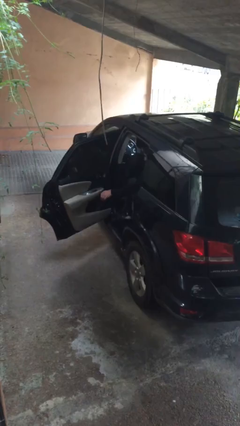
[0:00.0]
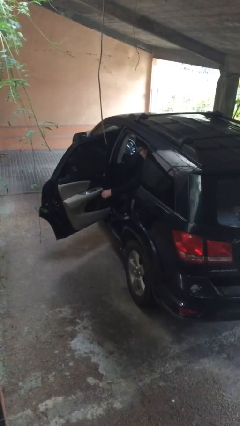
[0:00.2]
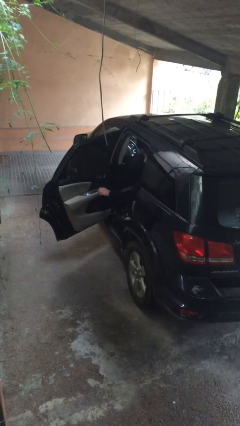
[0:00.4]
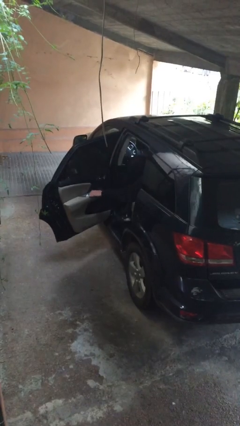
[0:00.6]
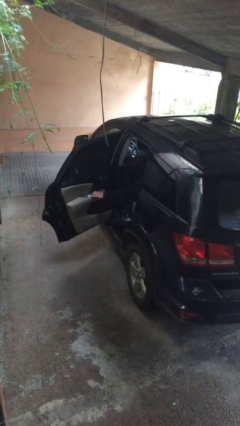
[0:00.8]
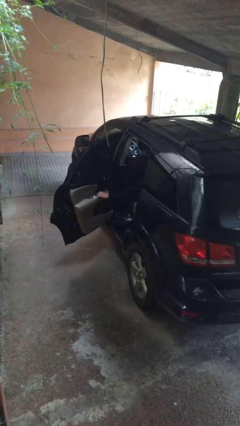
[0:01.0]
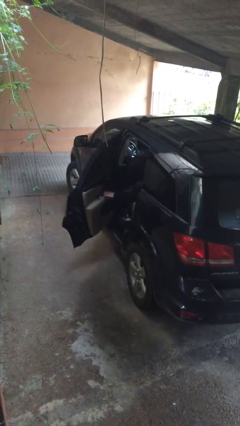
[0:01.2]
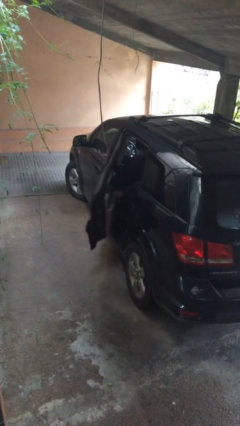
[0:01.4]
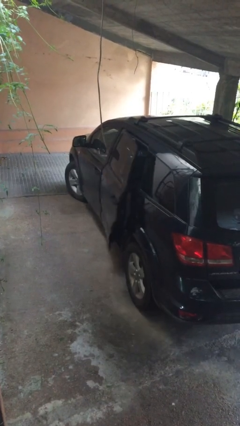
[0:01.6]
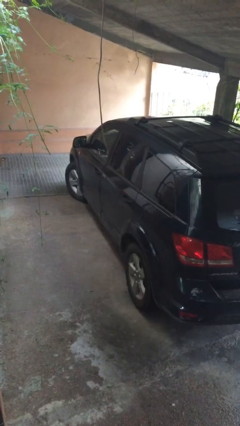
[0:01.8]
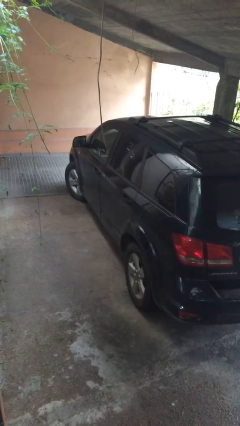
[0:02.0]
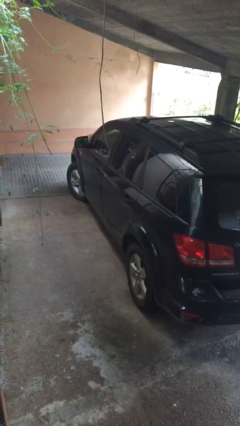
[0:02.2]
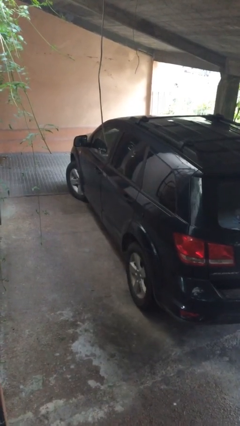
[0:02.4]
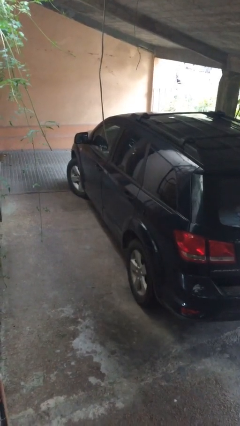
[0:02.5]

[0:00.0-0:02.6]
person closes car door

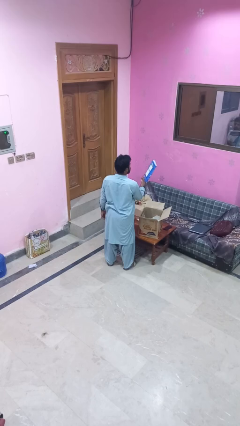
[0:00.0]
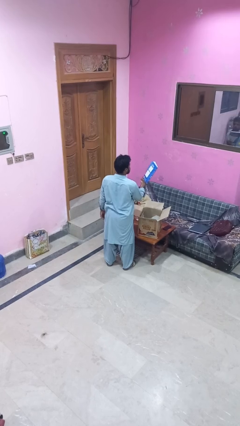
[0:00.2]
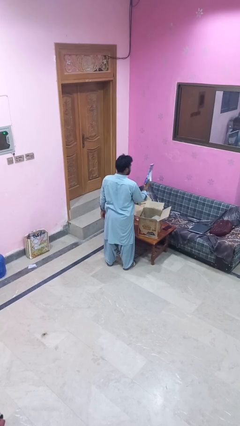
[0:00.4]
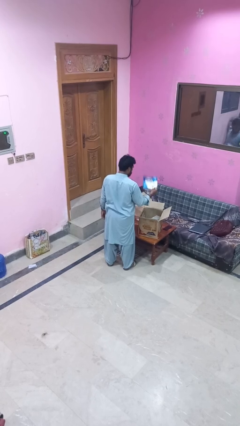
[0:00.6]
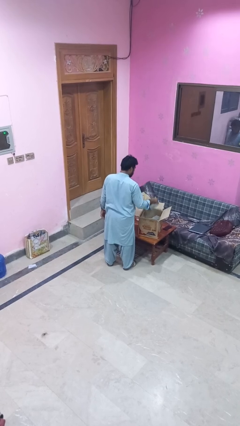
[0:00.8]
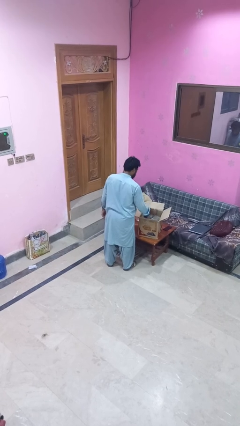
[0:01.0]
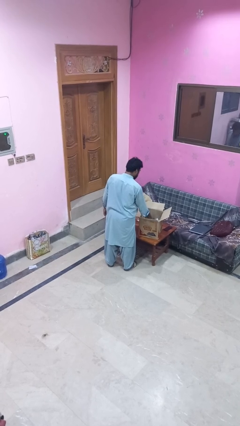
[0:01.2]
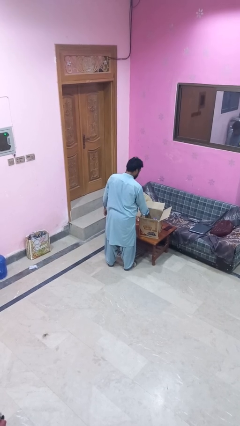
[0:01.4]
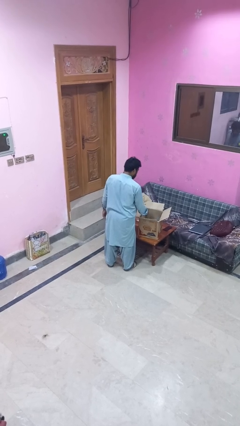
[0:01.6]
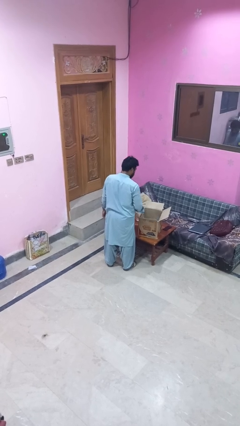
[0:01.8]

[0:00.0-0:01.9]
person puts object into box

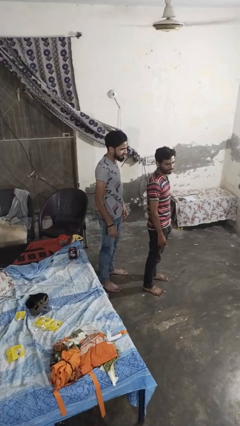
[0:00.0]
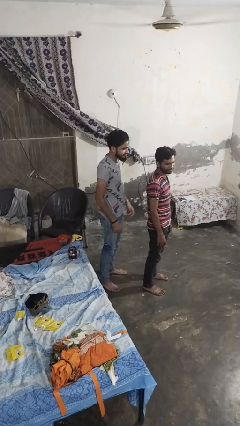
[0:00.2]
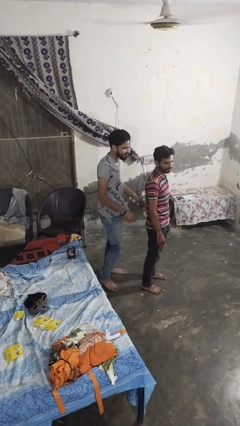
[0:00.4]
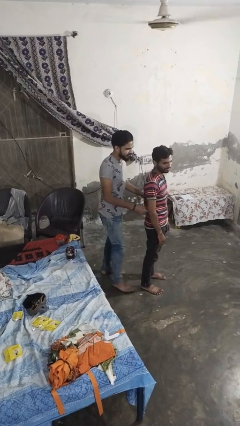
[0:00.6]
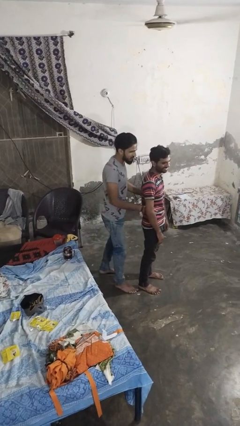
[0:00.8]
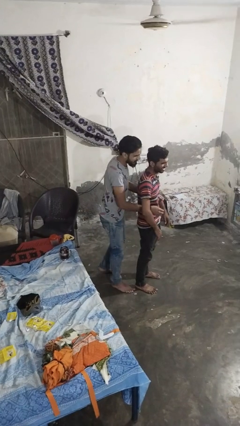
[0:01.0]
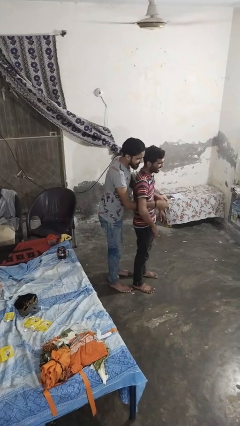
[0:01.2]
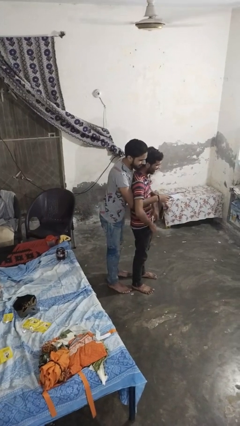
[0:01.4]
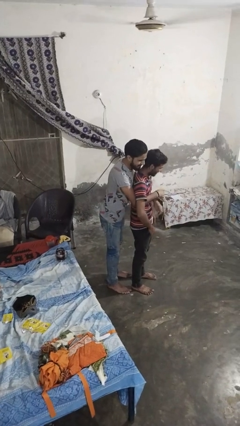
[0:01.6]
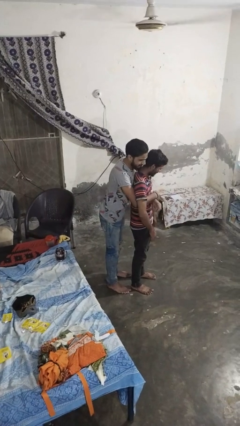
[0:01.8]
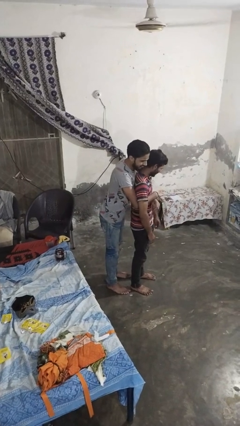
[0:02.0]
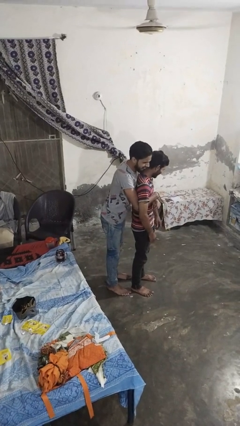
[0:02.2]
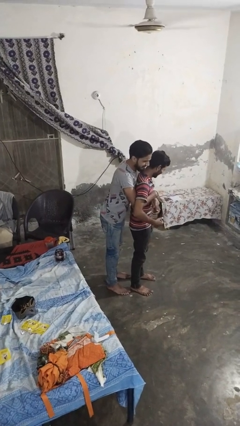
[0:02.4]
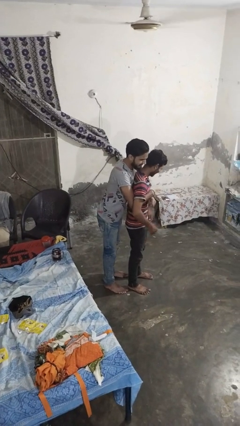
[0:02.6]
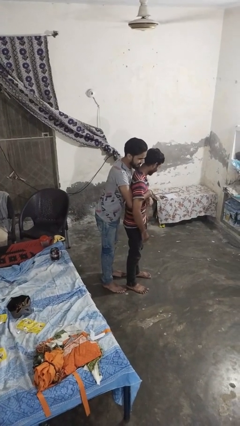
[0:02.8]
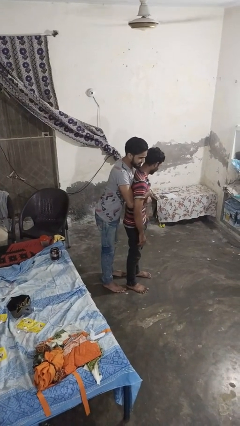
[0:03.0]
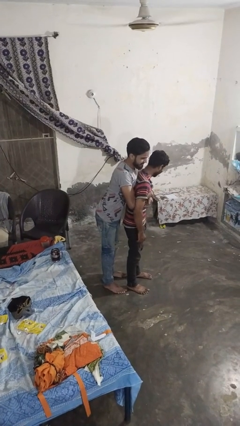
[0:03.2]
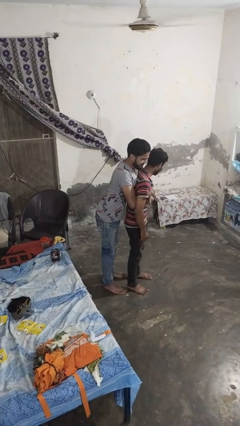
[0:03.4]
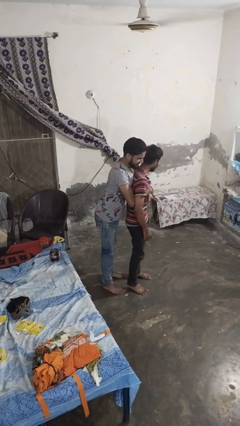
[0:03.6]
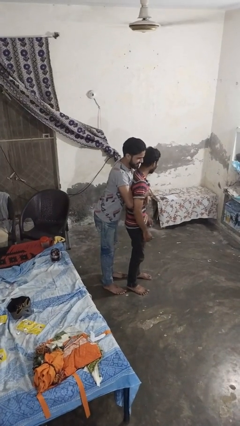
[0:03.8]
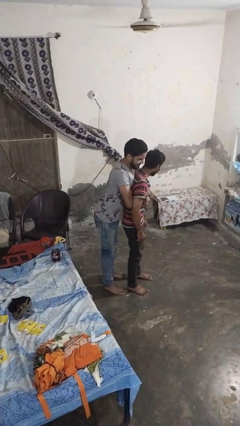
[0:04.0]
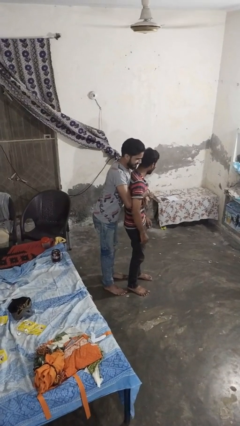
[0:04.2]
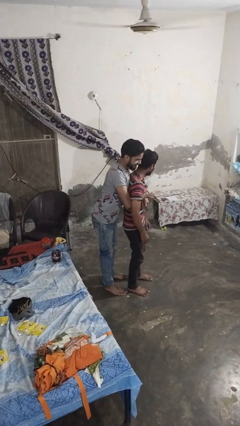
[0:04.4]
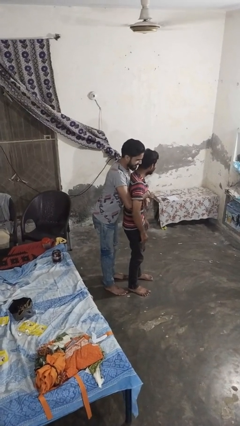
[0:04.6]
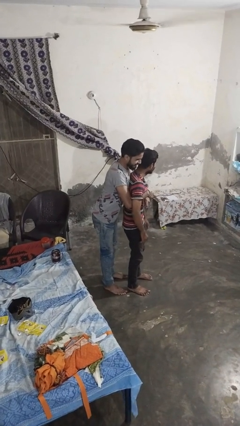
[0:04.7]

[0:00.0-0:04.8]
person hugs person from behind

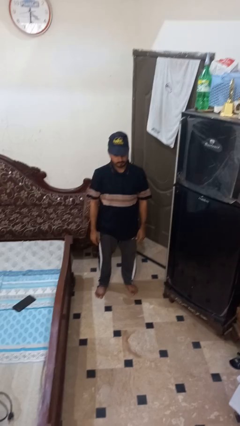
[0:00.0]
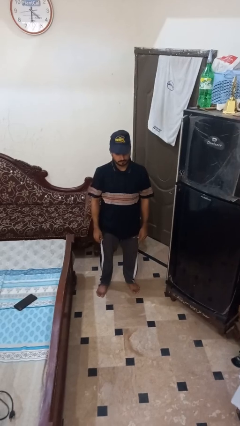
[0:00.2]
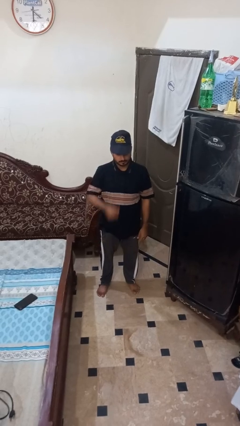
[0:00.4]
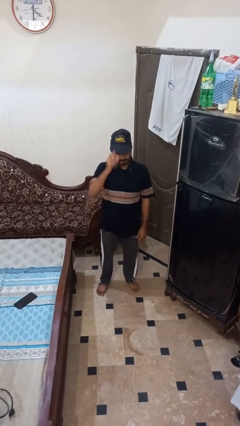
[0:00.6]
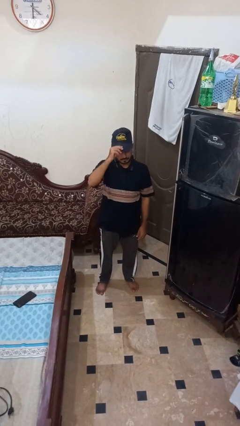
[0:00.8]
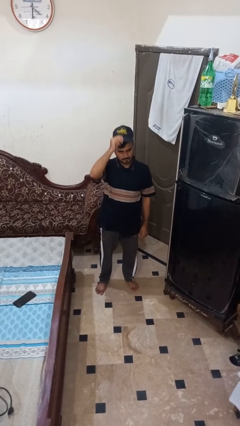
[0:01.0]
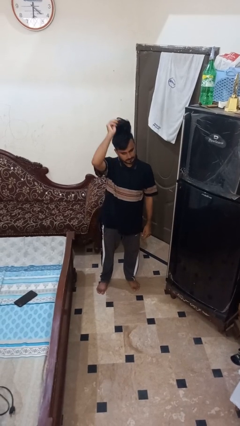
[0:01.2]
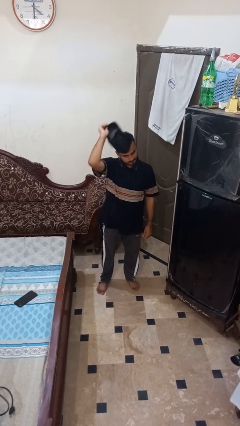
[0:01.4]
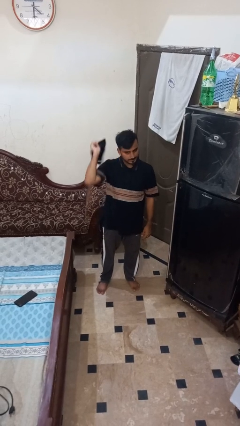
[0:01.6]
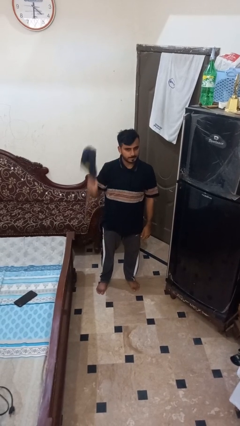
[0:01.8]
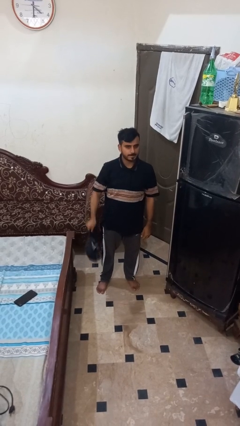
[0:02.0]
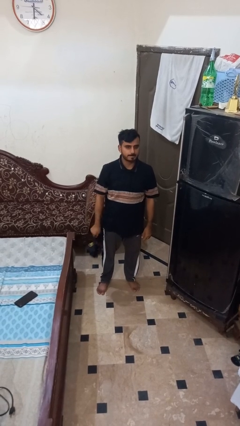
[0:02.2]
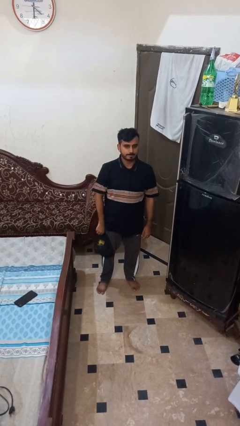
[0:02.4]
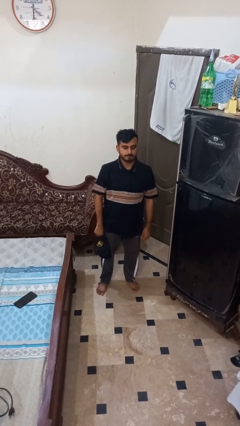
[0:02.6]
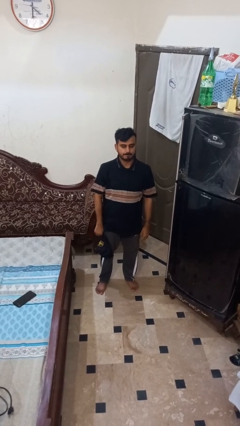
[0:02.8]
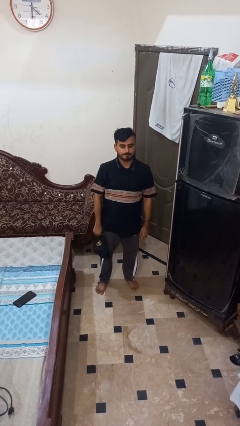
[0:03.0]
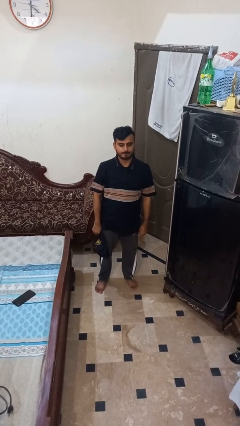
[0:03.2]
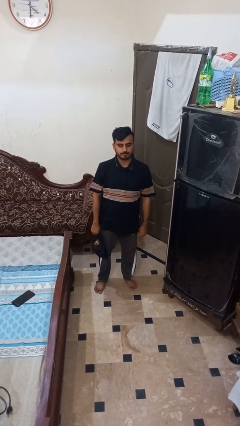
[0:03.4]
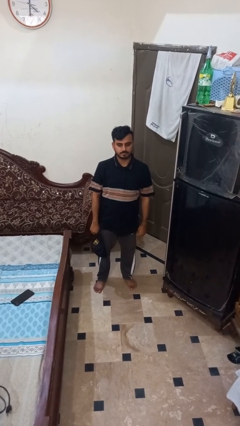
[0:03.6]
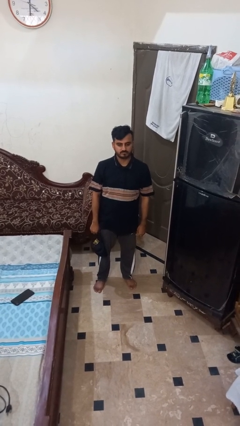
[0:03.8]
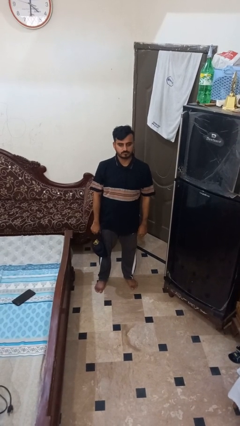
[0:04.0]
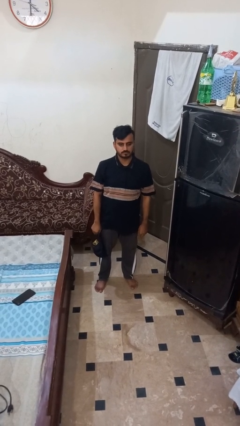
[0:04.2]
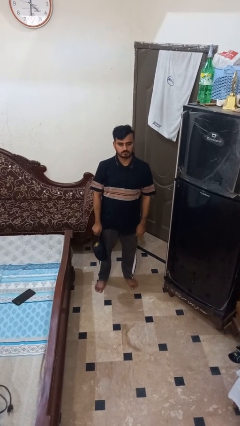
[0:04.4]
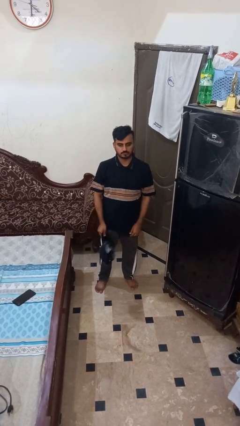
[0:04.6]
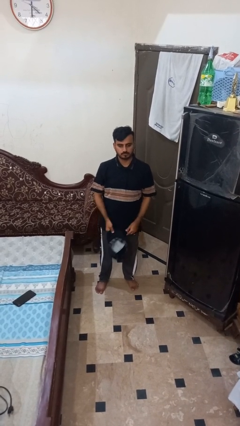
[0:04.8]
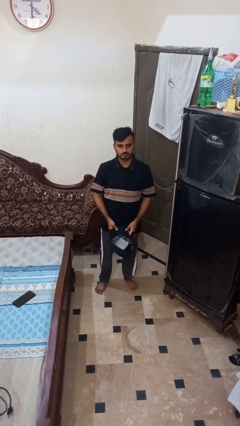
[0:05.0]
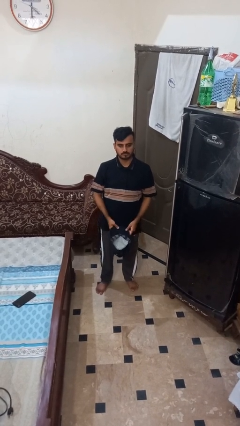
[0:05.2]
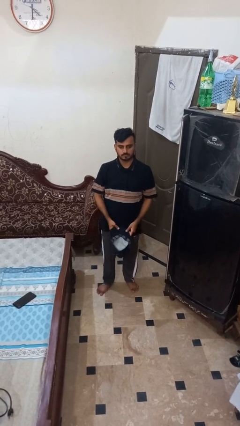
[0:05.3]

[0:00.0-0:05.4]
person takes off hat

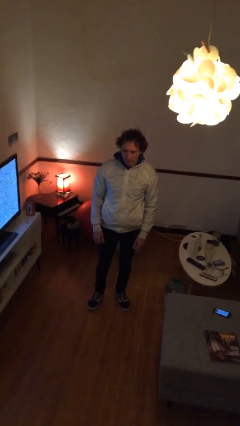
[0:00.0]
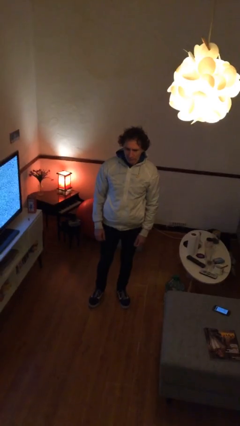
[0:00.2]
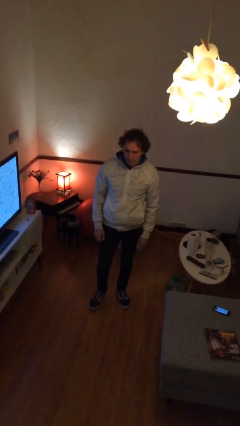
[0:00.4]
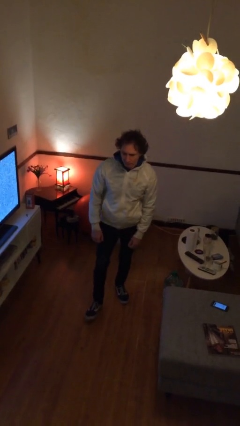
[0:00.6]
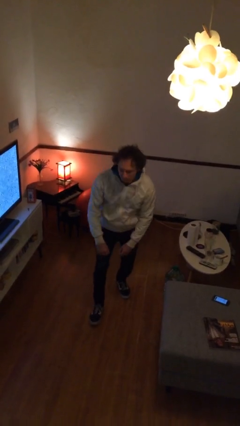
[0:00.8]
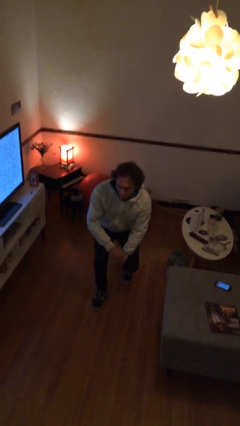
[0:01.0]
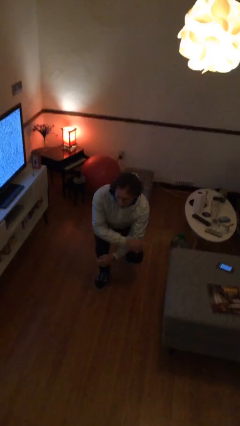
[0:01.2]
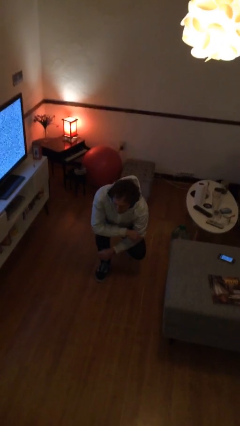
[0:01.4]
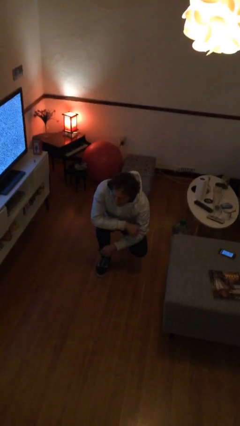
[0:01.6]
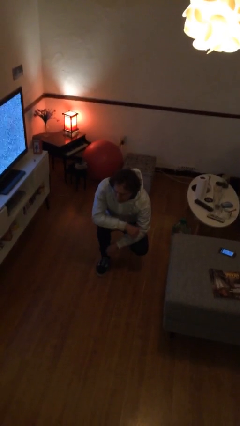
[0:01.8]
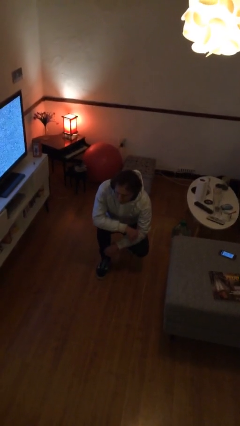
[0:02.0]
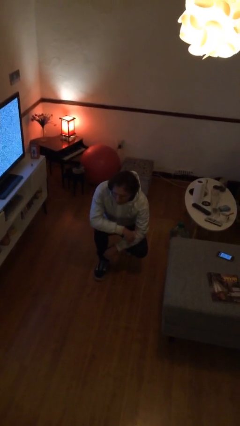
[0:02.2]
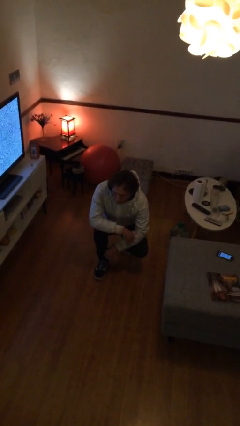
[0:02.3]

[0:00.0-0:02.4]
person squats

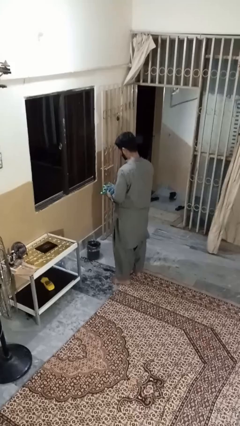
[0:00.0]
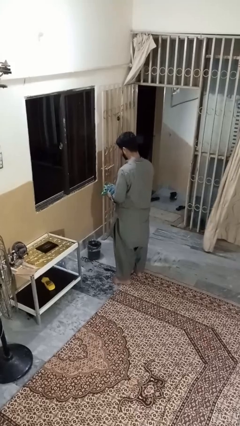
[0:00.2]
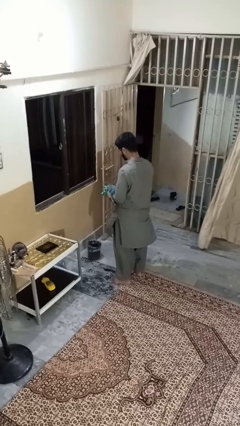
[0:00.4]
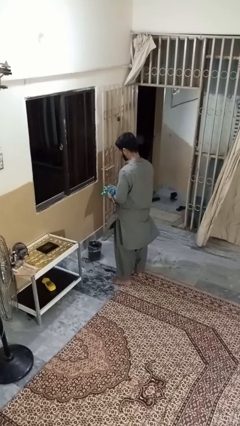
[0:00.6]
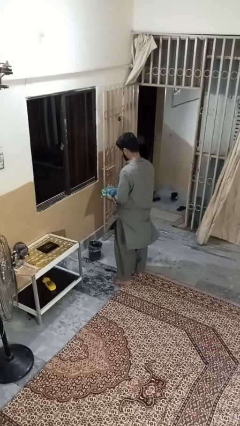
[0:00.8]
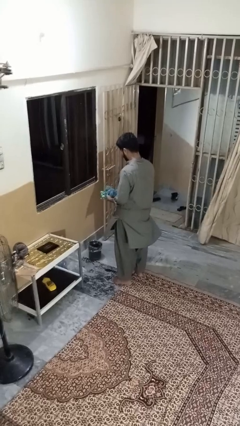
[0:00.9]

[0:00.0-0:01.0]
person discards trash
